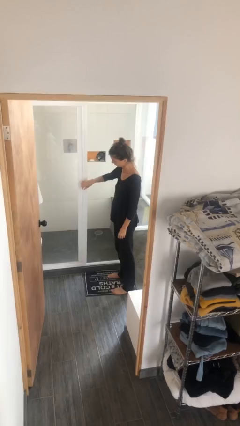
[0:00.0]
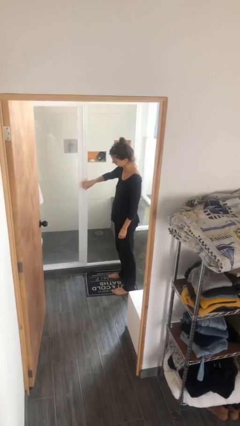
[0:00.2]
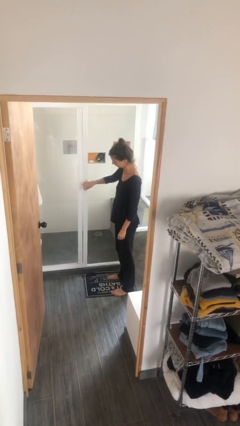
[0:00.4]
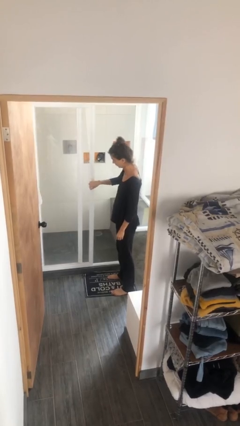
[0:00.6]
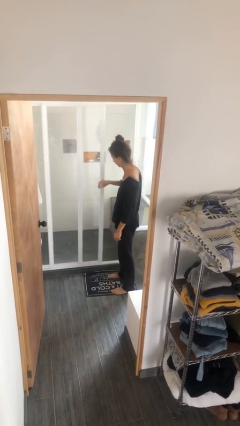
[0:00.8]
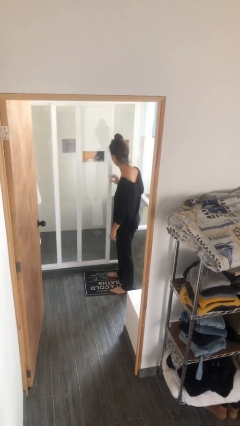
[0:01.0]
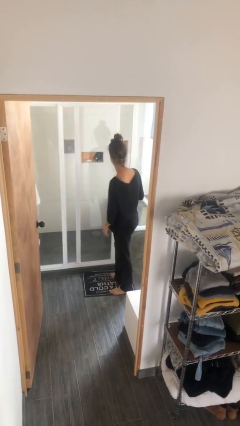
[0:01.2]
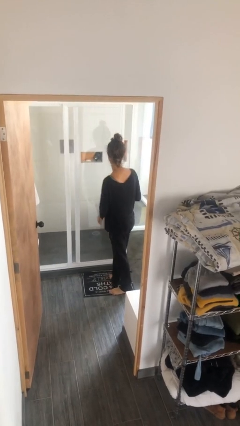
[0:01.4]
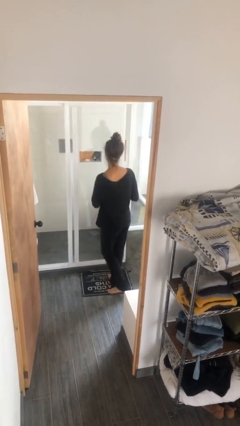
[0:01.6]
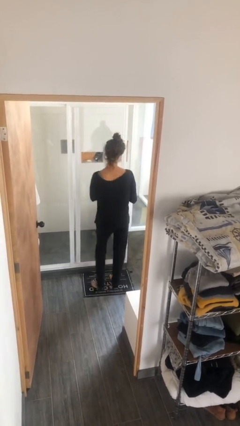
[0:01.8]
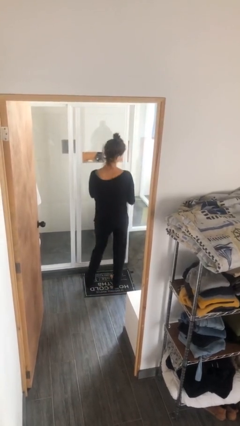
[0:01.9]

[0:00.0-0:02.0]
person closes sliding door

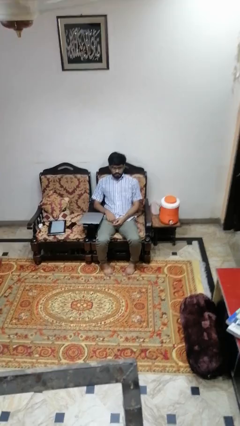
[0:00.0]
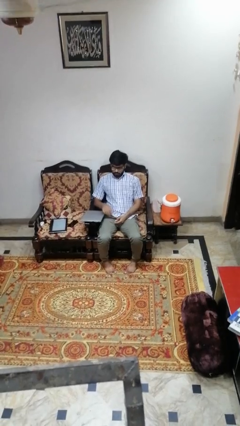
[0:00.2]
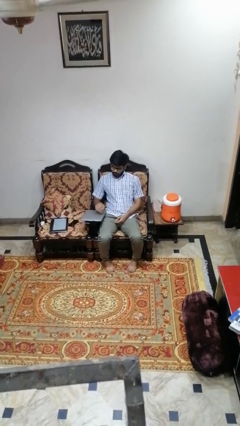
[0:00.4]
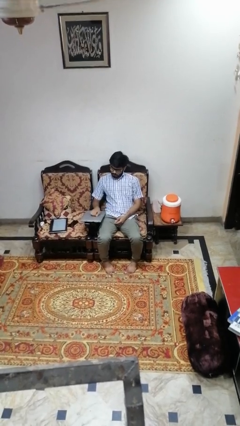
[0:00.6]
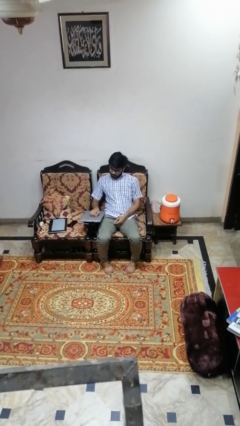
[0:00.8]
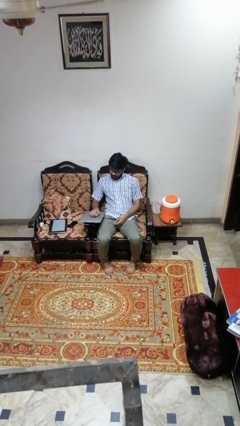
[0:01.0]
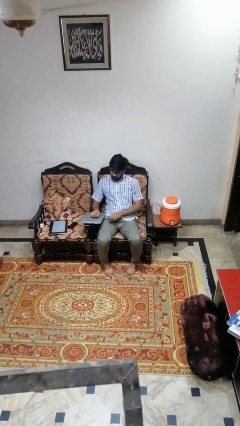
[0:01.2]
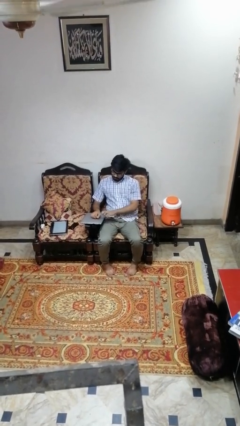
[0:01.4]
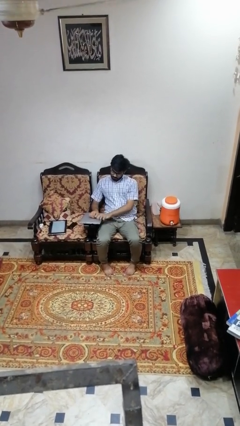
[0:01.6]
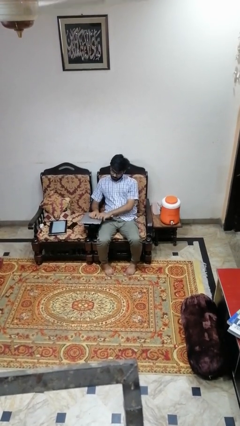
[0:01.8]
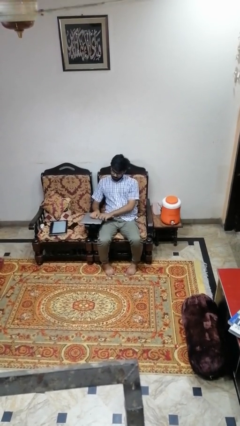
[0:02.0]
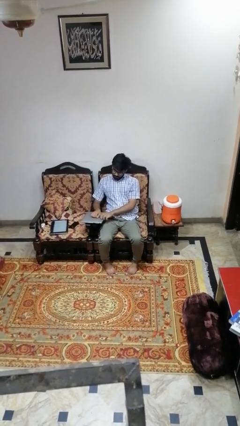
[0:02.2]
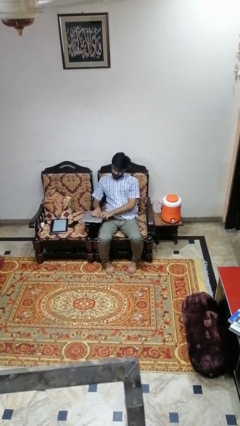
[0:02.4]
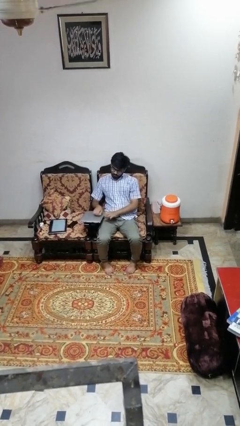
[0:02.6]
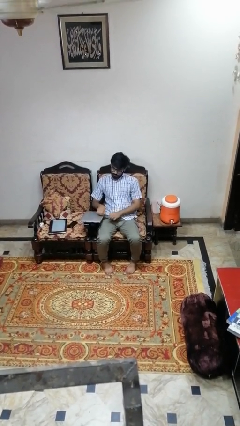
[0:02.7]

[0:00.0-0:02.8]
person taps object with finger

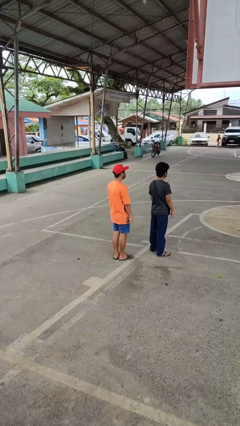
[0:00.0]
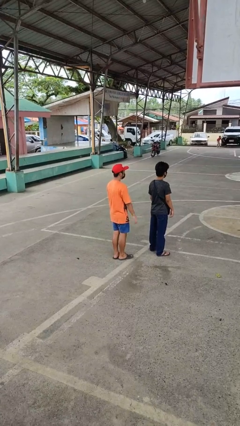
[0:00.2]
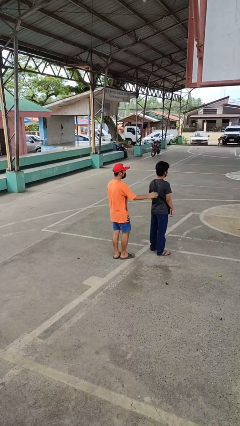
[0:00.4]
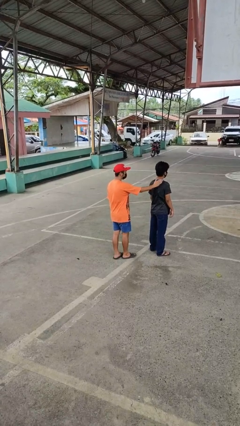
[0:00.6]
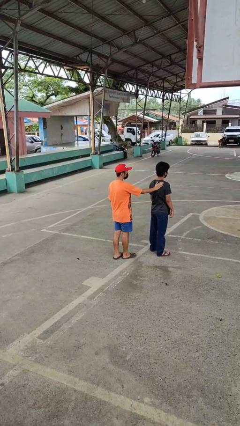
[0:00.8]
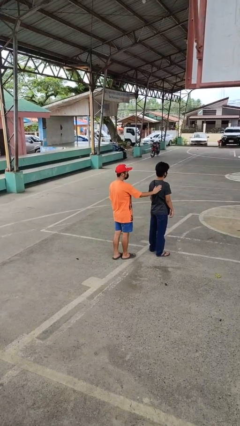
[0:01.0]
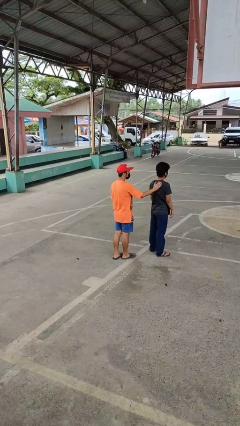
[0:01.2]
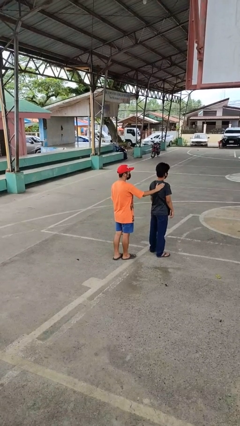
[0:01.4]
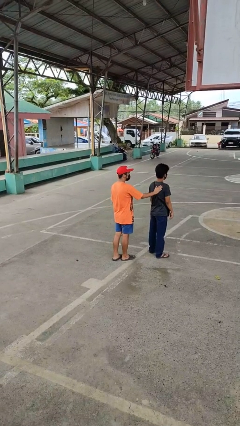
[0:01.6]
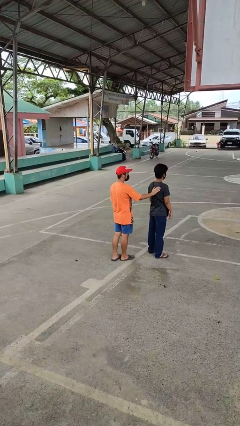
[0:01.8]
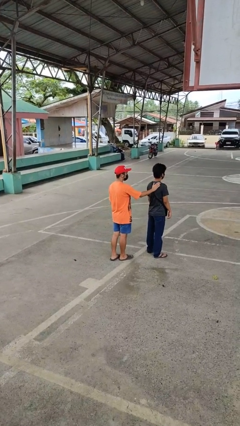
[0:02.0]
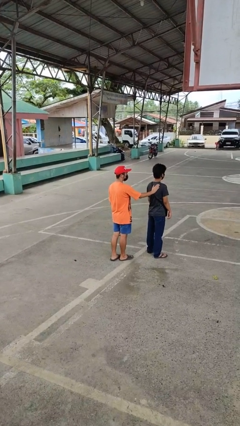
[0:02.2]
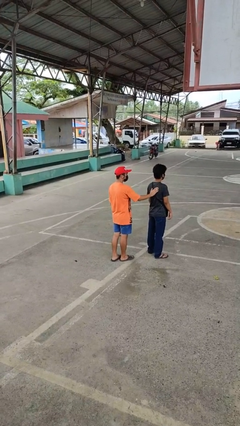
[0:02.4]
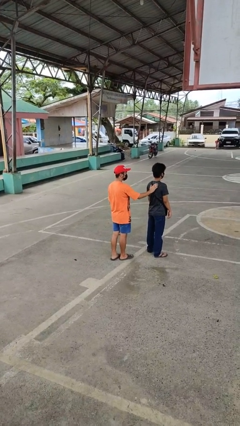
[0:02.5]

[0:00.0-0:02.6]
person touches back of person

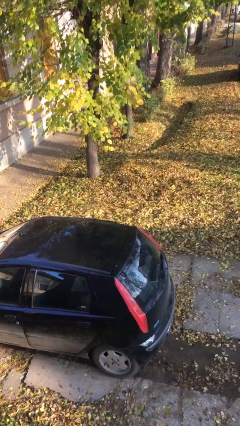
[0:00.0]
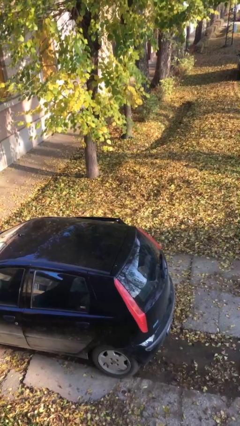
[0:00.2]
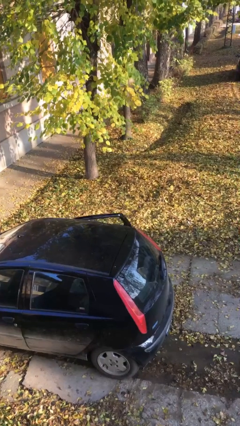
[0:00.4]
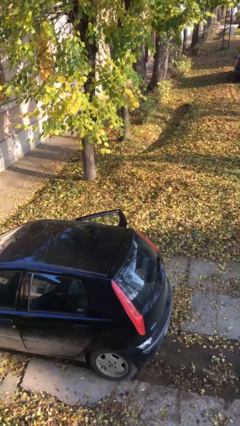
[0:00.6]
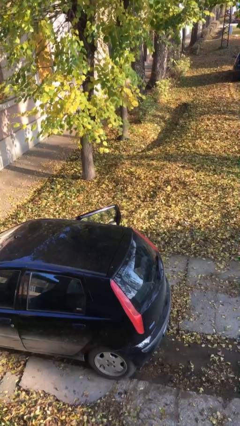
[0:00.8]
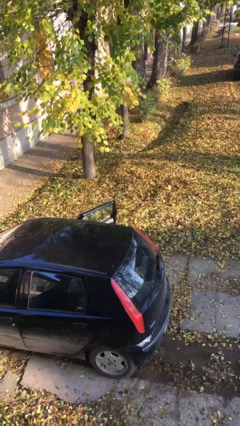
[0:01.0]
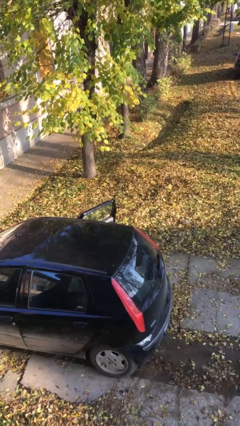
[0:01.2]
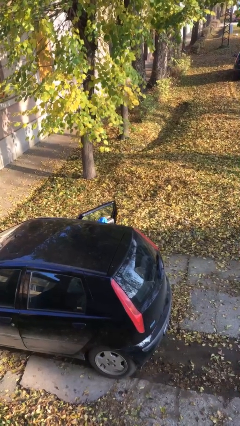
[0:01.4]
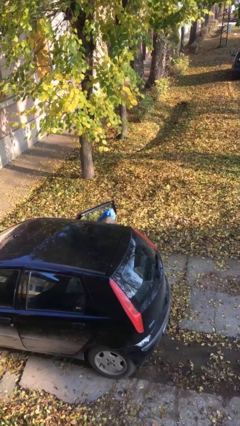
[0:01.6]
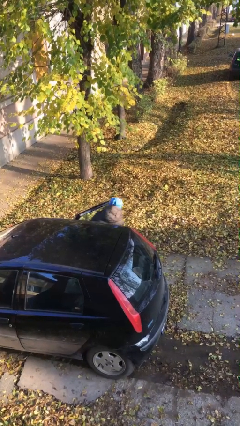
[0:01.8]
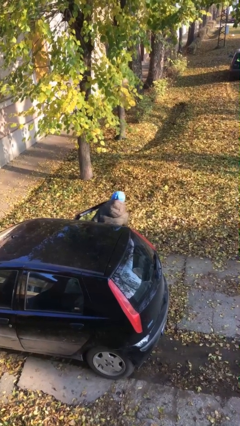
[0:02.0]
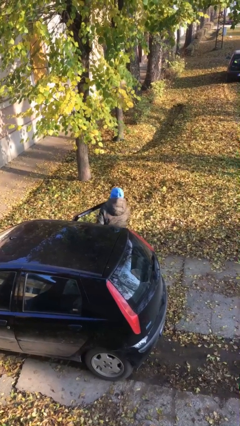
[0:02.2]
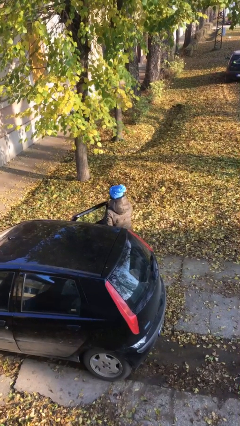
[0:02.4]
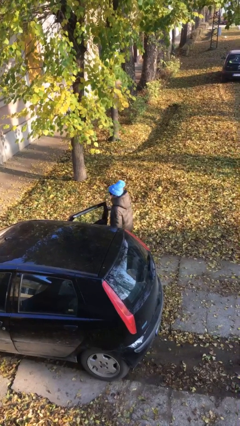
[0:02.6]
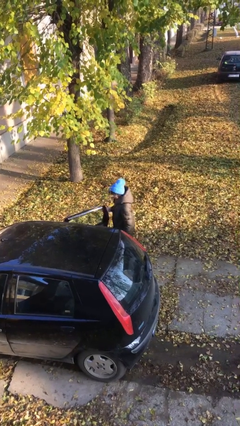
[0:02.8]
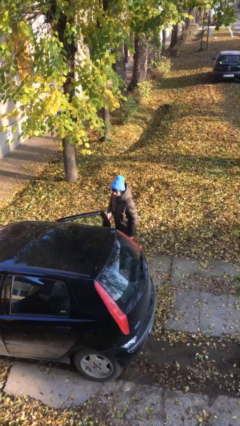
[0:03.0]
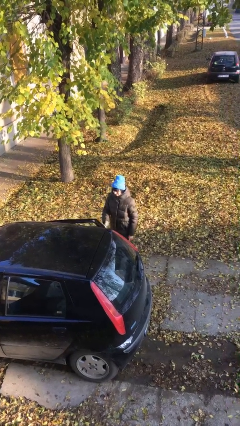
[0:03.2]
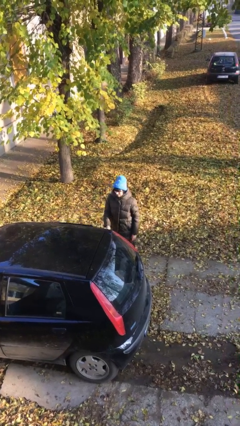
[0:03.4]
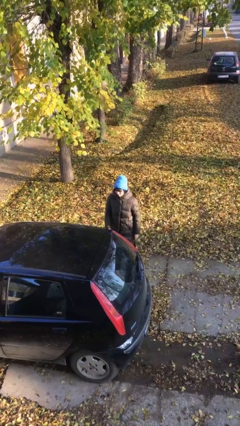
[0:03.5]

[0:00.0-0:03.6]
person exits car

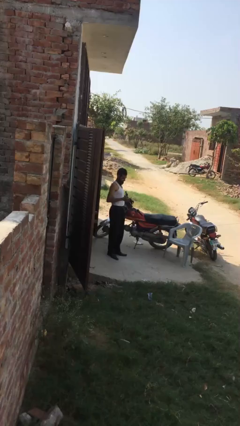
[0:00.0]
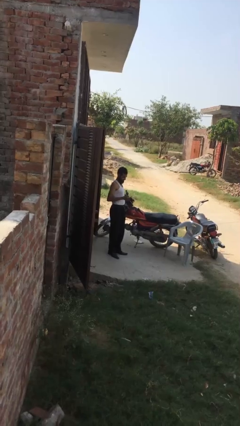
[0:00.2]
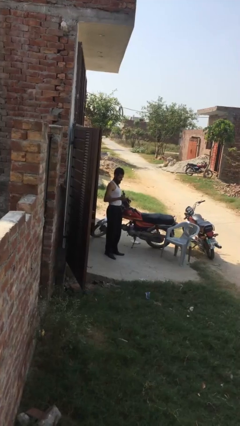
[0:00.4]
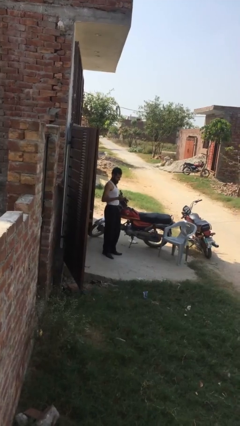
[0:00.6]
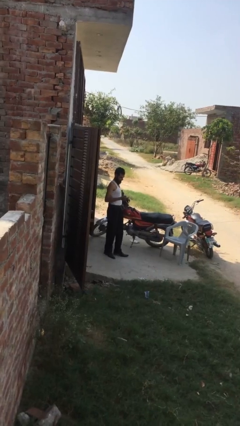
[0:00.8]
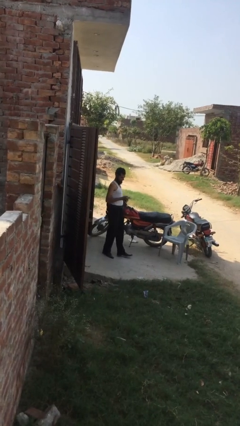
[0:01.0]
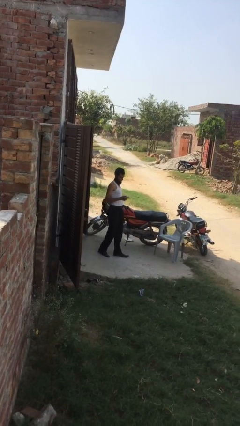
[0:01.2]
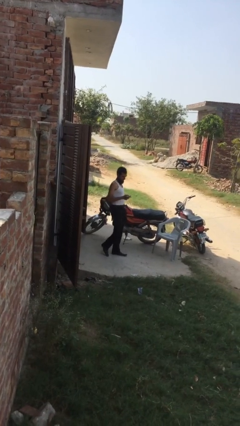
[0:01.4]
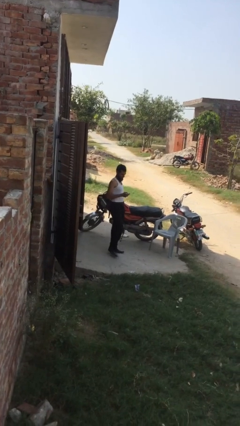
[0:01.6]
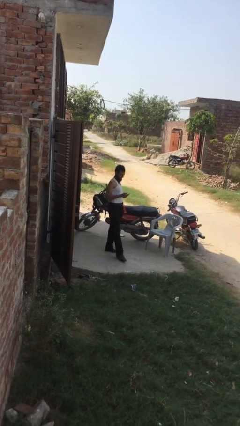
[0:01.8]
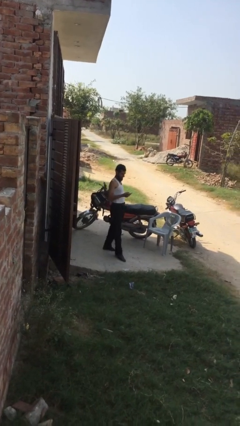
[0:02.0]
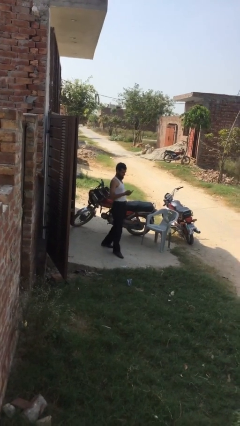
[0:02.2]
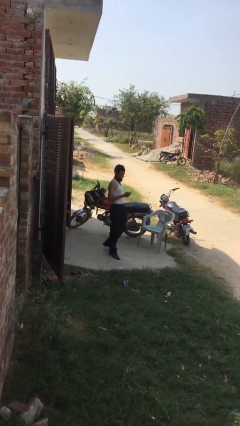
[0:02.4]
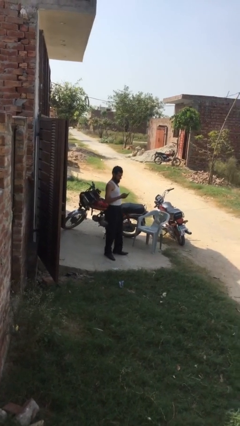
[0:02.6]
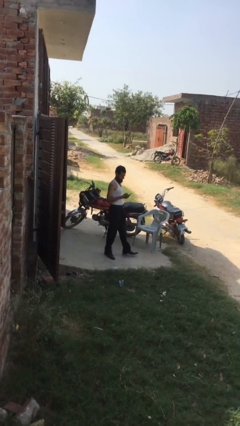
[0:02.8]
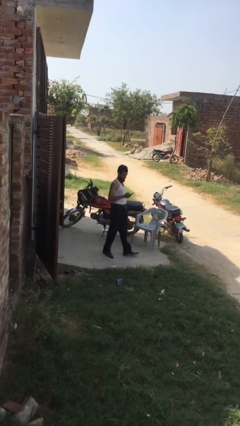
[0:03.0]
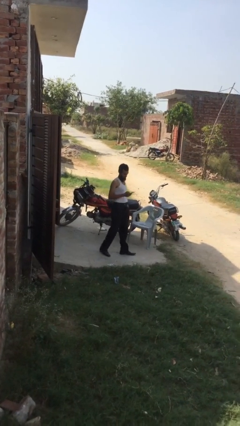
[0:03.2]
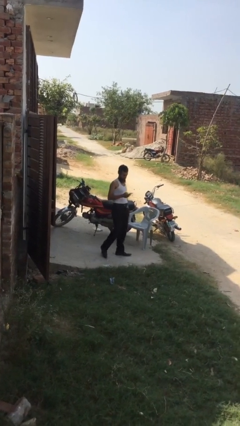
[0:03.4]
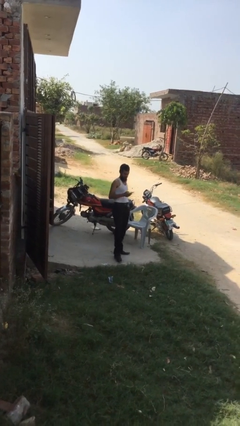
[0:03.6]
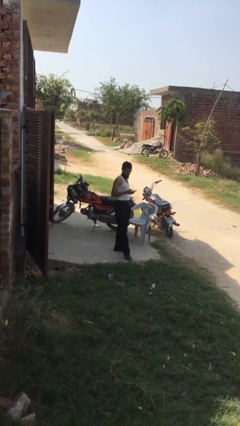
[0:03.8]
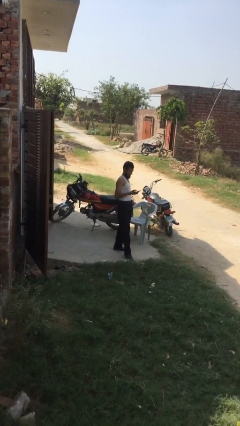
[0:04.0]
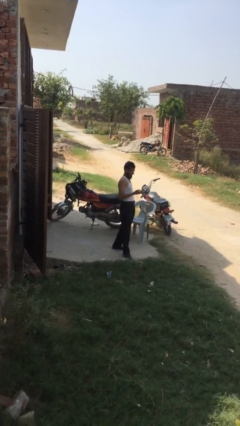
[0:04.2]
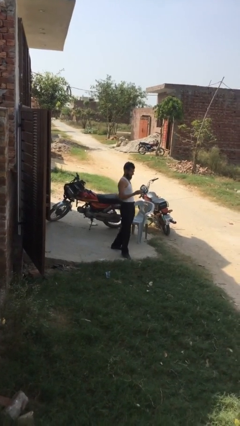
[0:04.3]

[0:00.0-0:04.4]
person texts on phone

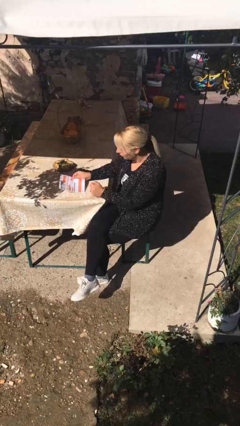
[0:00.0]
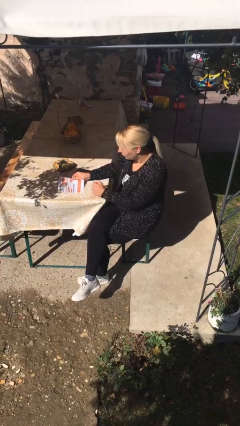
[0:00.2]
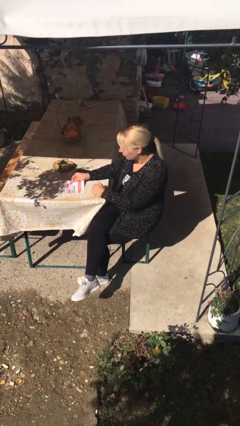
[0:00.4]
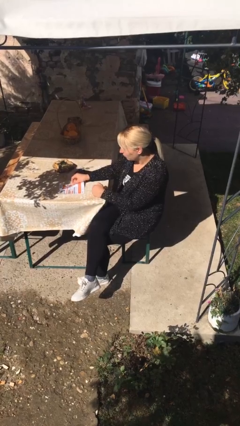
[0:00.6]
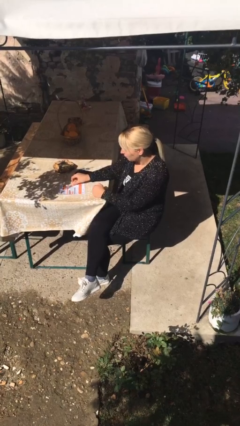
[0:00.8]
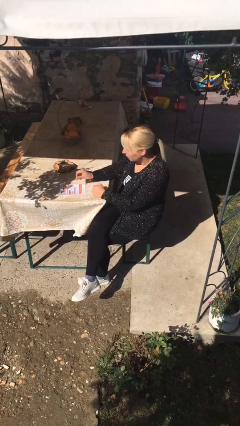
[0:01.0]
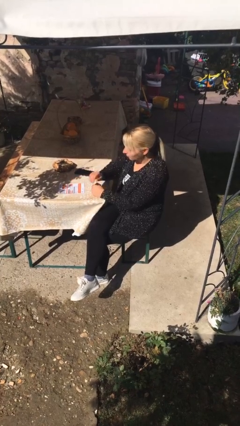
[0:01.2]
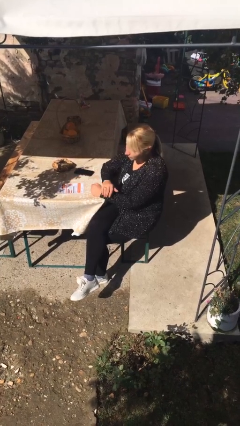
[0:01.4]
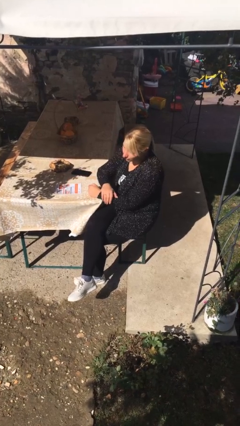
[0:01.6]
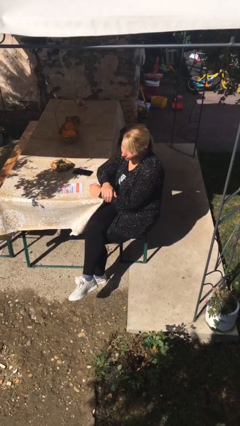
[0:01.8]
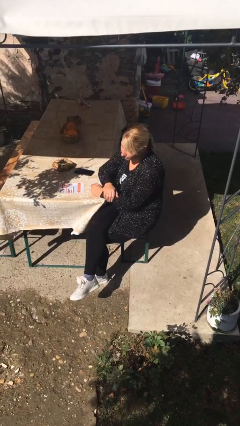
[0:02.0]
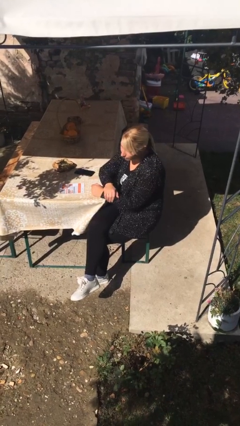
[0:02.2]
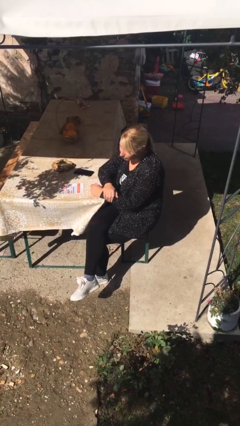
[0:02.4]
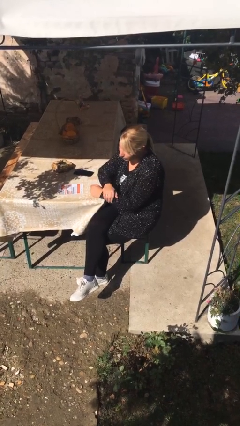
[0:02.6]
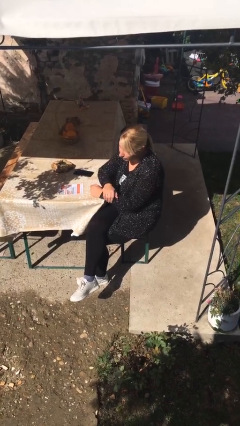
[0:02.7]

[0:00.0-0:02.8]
person puts down object on table
